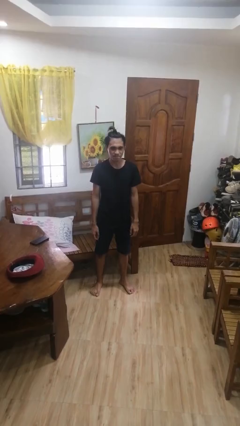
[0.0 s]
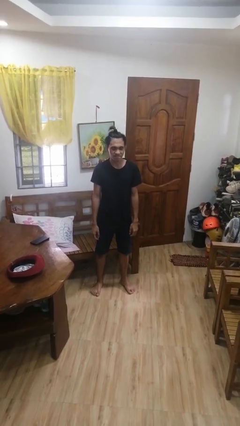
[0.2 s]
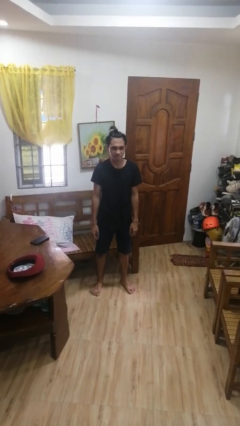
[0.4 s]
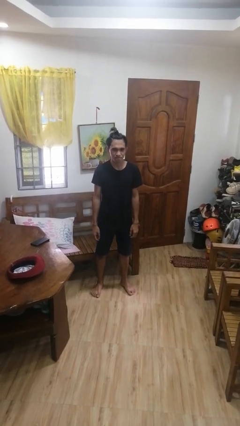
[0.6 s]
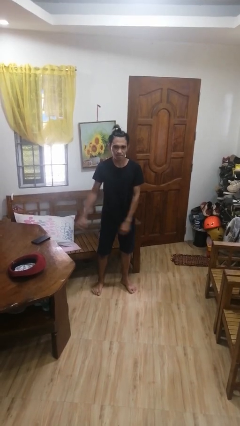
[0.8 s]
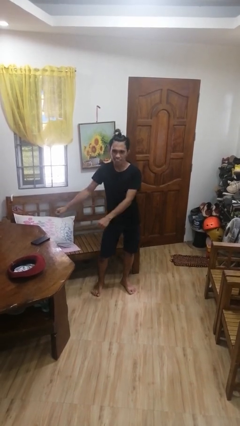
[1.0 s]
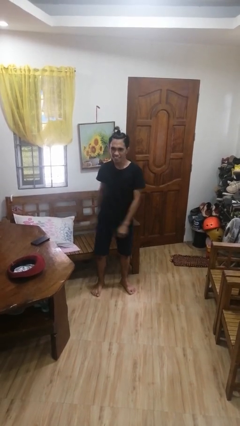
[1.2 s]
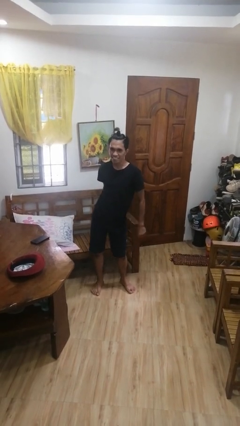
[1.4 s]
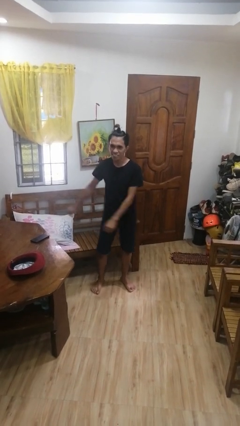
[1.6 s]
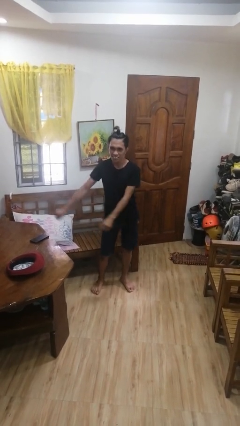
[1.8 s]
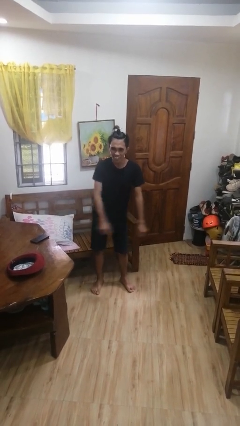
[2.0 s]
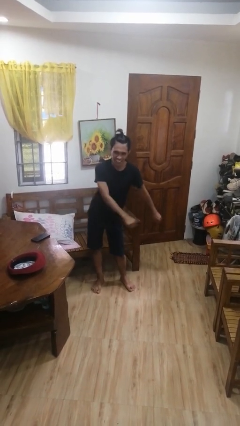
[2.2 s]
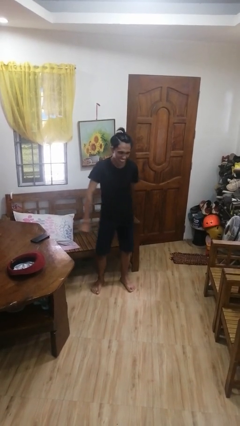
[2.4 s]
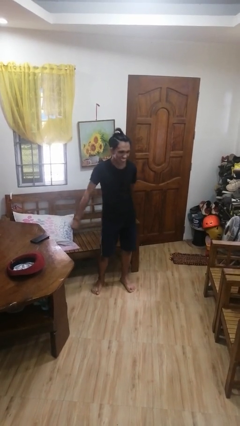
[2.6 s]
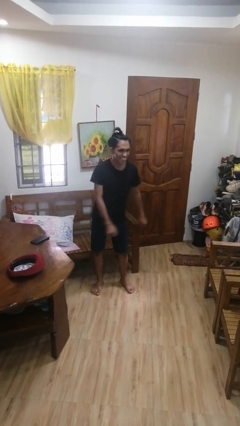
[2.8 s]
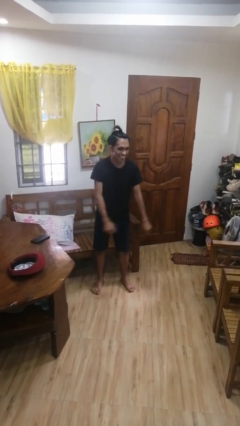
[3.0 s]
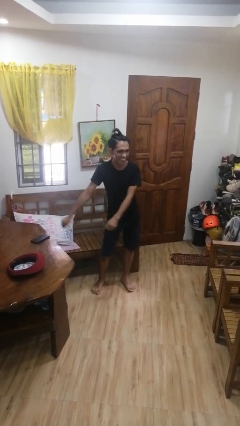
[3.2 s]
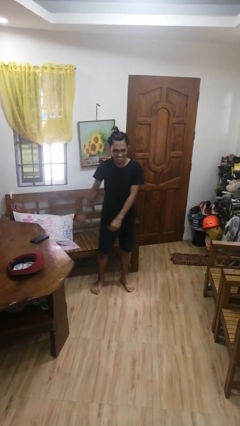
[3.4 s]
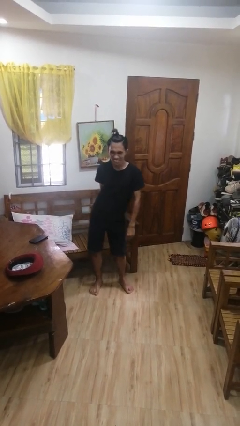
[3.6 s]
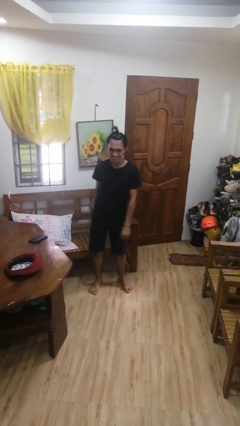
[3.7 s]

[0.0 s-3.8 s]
person dances in place

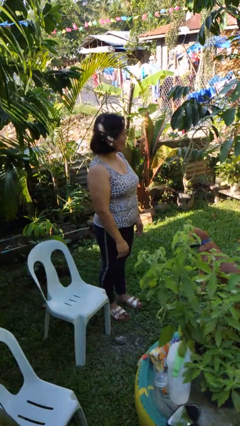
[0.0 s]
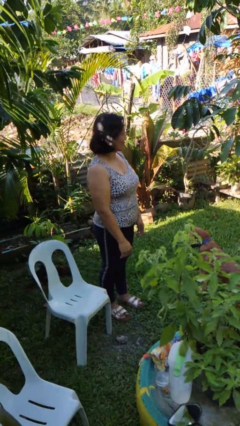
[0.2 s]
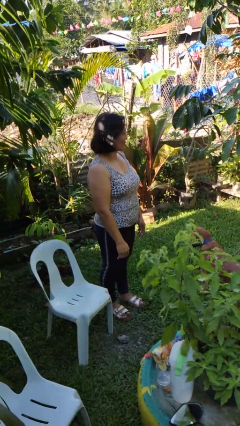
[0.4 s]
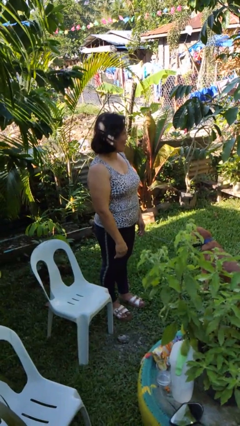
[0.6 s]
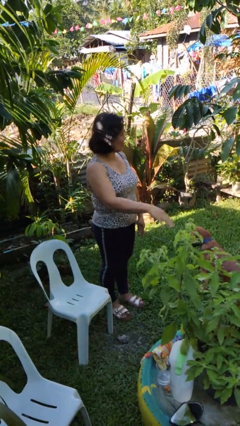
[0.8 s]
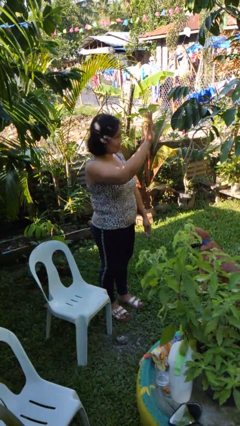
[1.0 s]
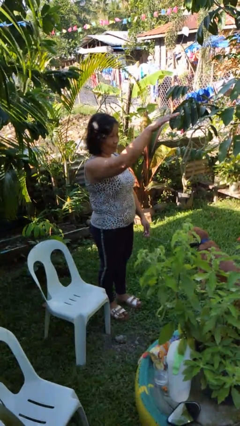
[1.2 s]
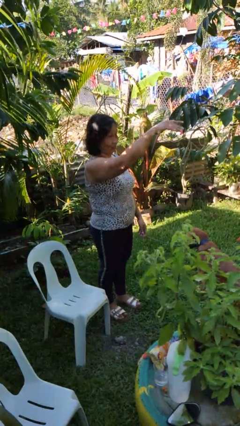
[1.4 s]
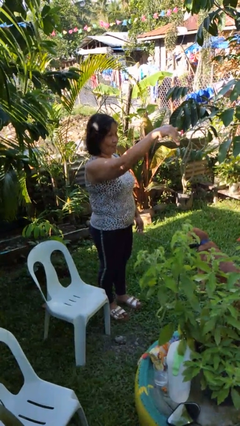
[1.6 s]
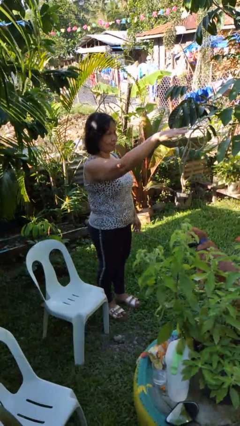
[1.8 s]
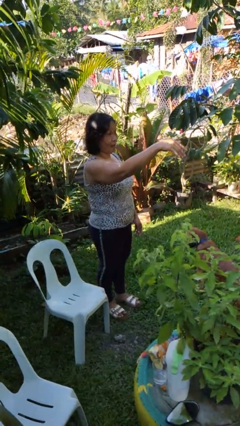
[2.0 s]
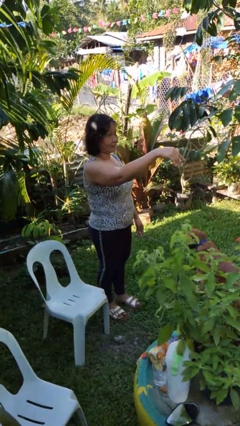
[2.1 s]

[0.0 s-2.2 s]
person gestures come here

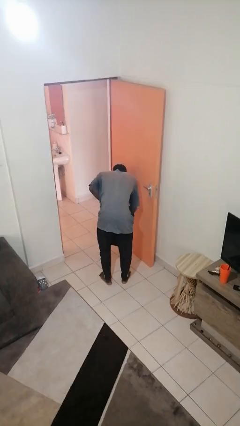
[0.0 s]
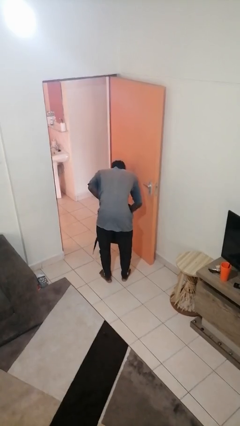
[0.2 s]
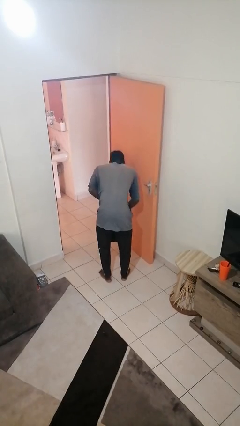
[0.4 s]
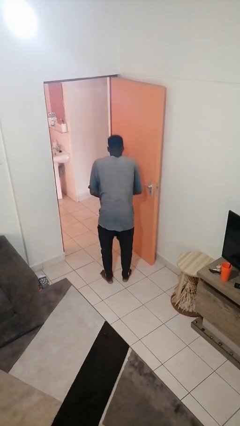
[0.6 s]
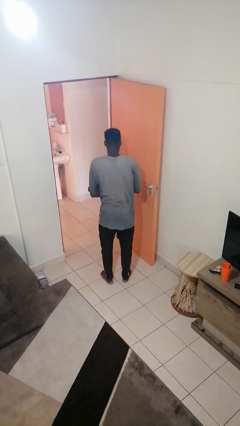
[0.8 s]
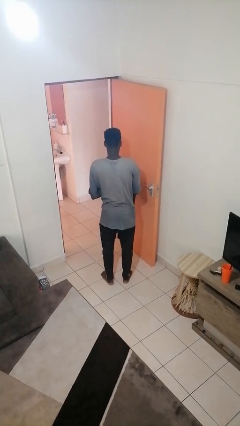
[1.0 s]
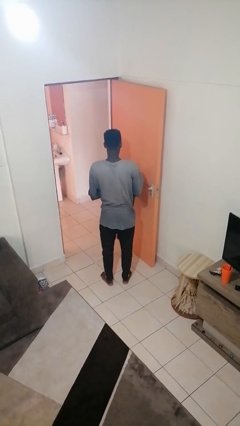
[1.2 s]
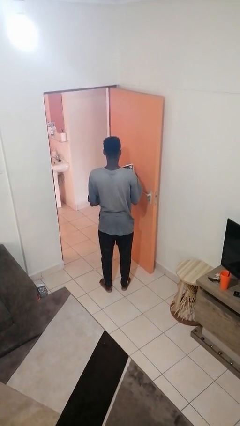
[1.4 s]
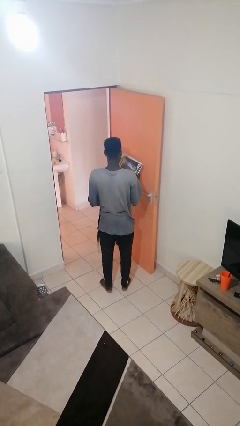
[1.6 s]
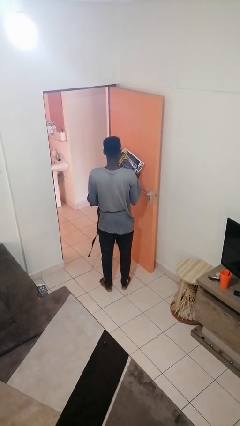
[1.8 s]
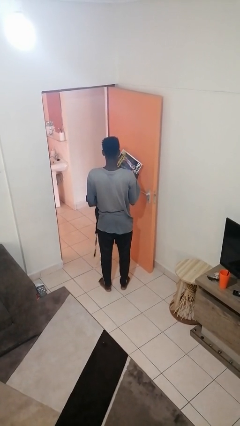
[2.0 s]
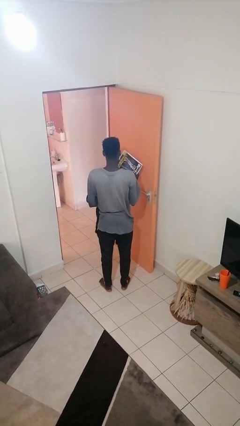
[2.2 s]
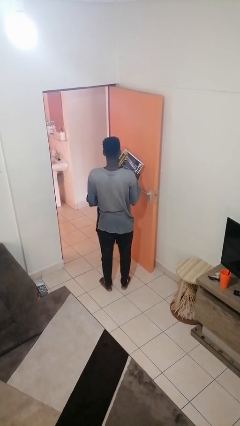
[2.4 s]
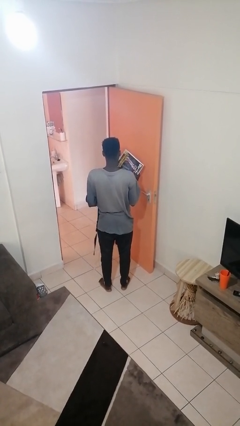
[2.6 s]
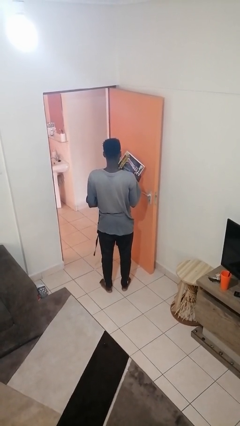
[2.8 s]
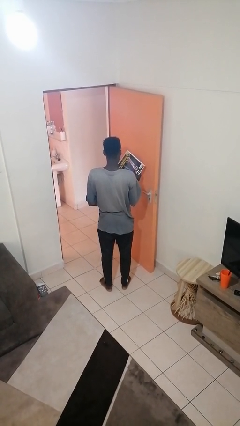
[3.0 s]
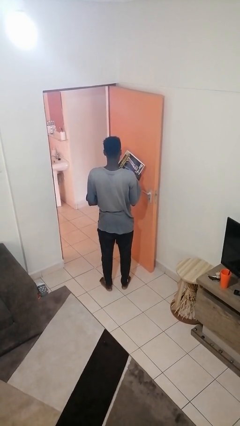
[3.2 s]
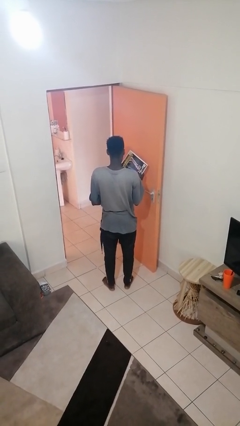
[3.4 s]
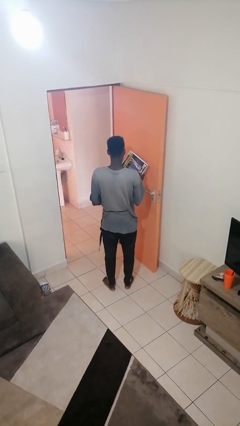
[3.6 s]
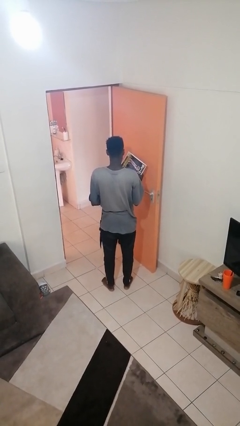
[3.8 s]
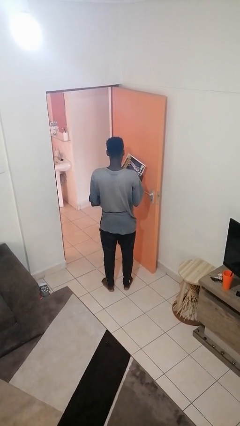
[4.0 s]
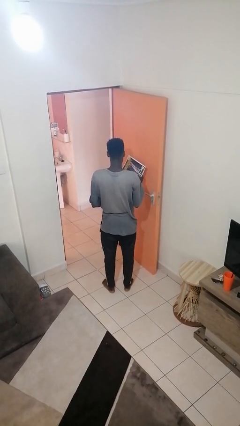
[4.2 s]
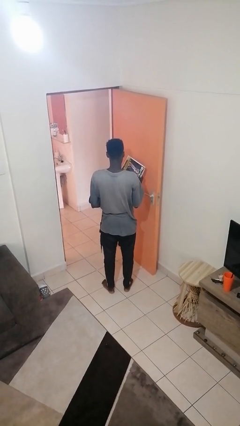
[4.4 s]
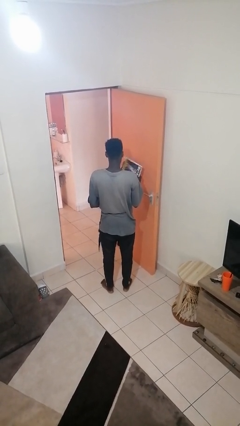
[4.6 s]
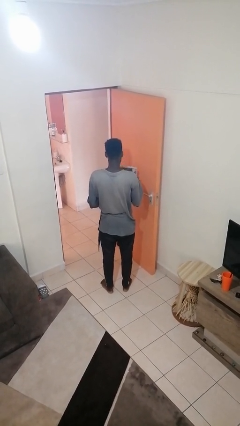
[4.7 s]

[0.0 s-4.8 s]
person takes object from backpack

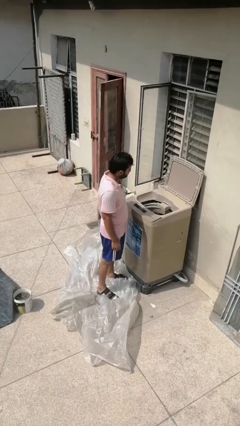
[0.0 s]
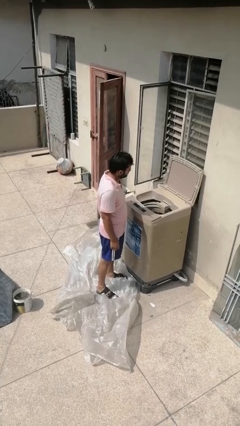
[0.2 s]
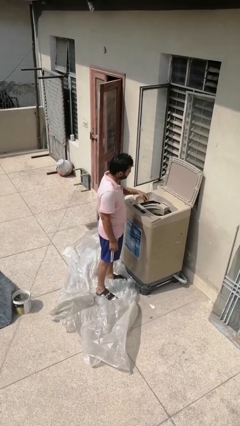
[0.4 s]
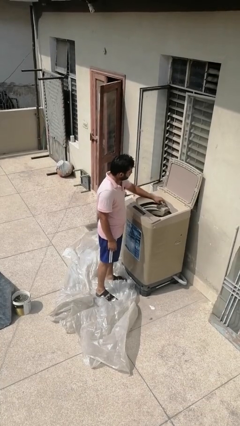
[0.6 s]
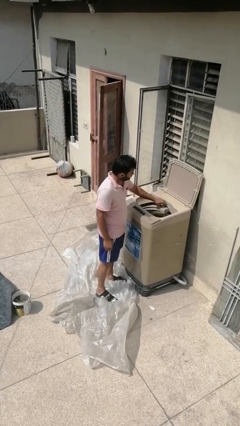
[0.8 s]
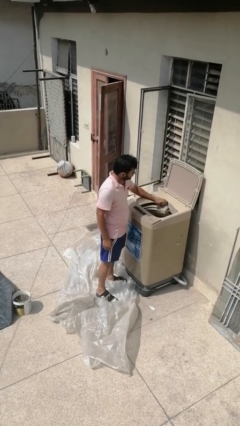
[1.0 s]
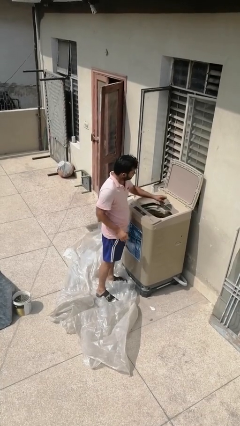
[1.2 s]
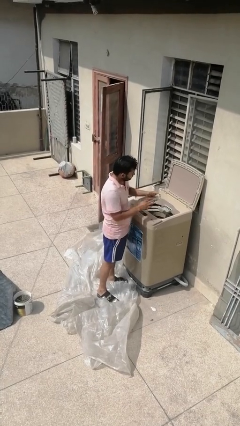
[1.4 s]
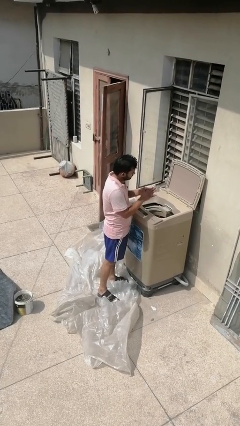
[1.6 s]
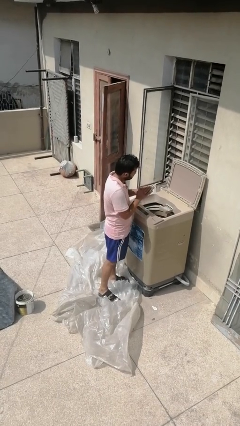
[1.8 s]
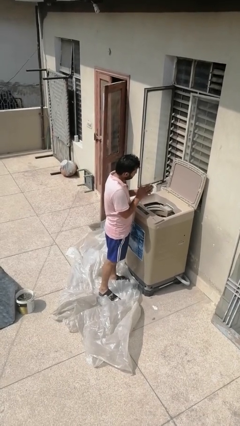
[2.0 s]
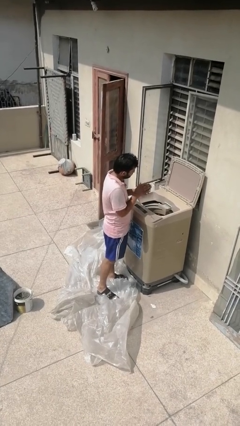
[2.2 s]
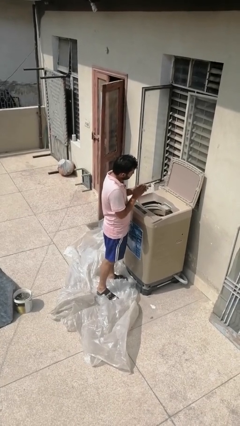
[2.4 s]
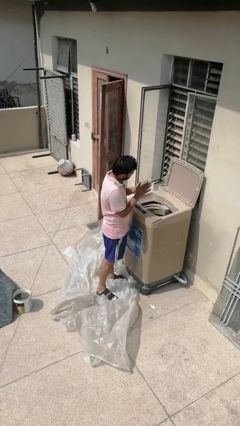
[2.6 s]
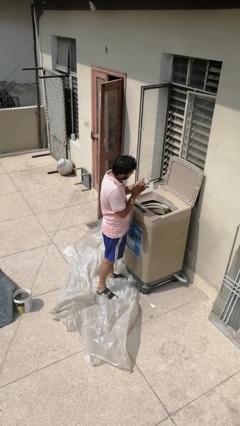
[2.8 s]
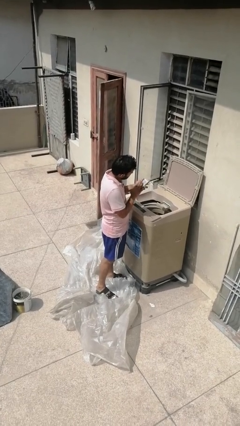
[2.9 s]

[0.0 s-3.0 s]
person cleans dryer lint trap

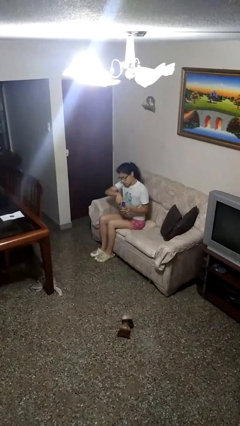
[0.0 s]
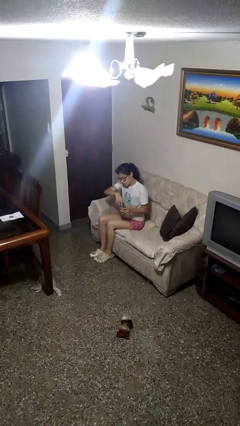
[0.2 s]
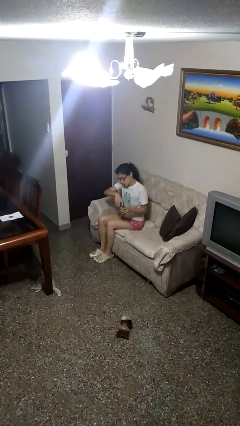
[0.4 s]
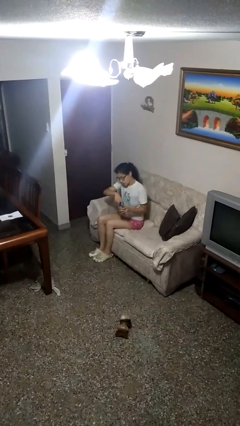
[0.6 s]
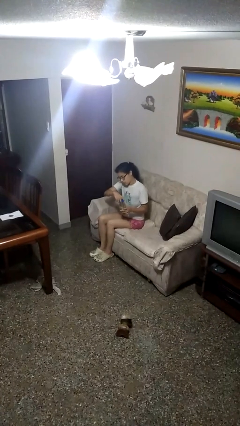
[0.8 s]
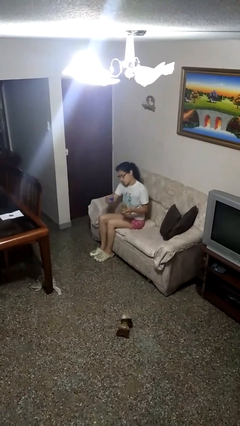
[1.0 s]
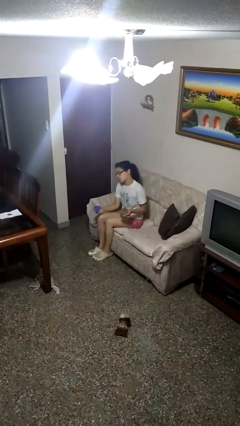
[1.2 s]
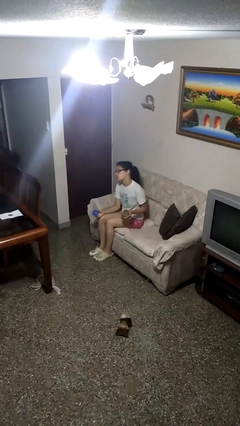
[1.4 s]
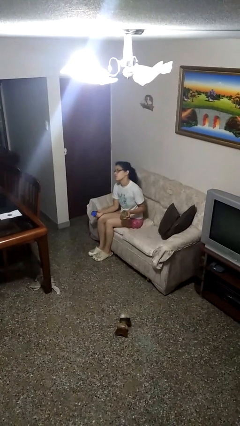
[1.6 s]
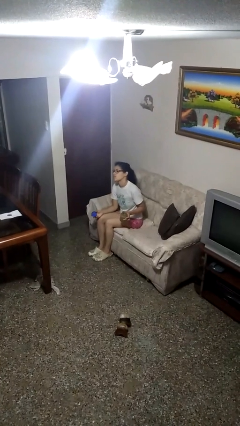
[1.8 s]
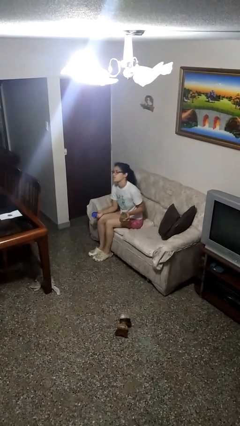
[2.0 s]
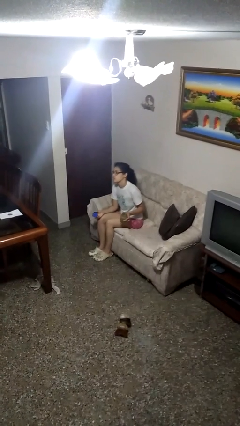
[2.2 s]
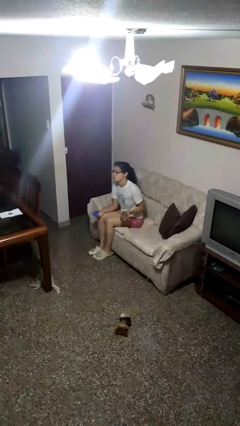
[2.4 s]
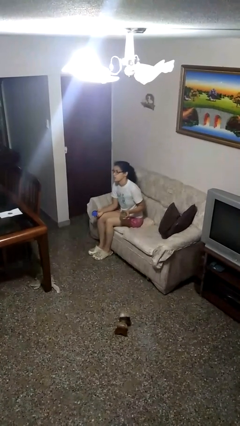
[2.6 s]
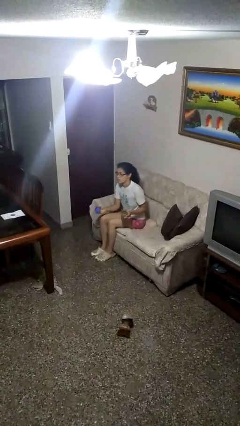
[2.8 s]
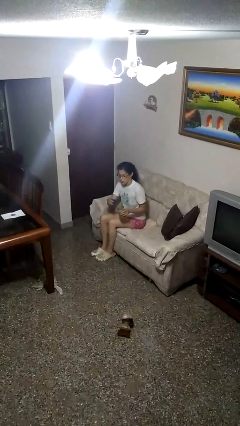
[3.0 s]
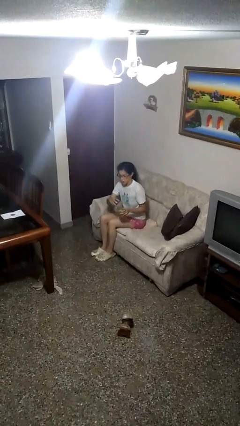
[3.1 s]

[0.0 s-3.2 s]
person opens jar

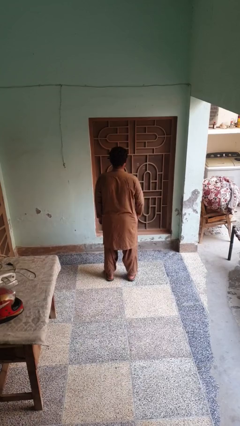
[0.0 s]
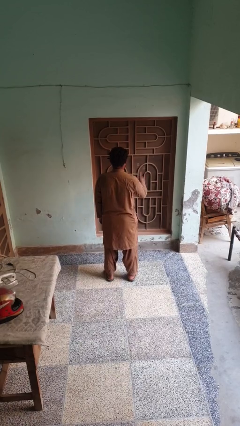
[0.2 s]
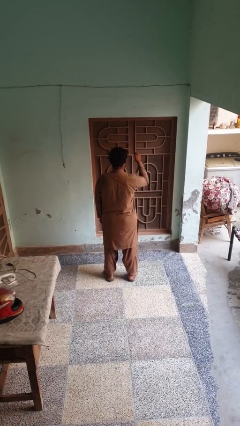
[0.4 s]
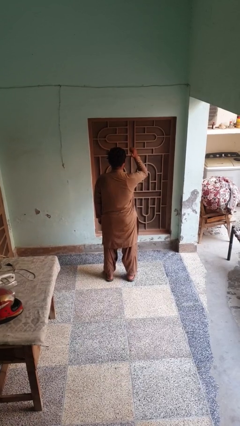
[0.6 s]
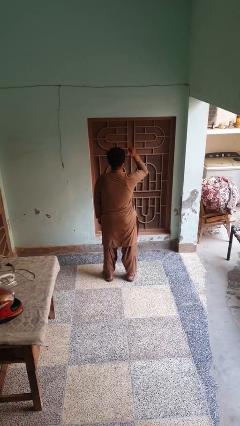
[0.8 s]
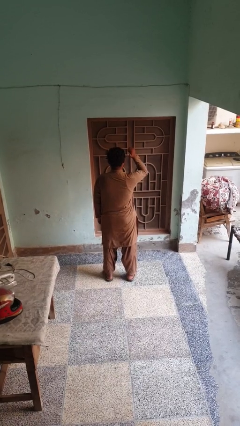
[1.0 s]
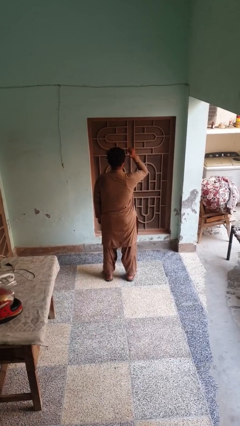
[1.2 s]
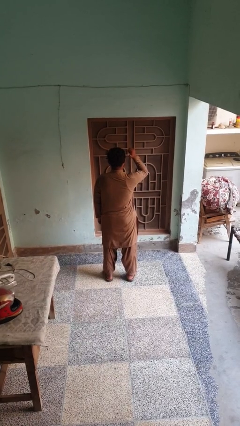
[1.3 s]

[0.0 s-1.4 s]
person gestures behind me
